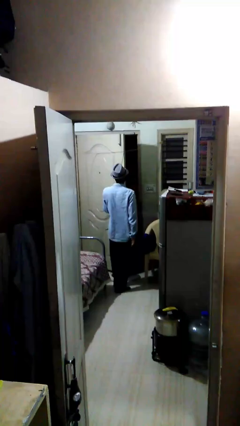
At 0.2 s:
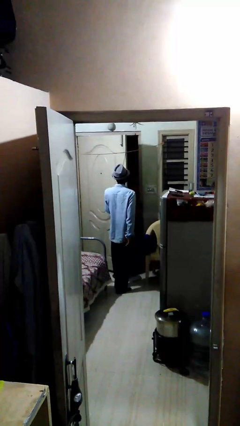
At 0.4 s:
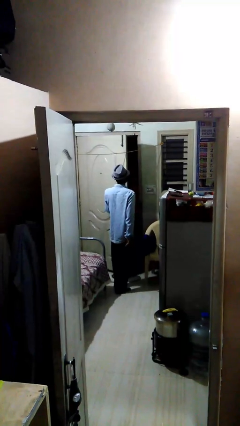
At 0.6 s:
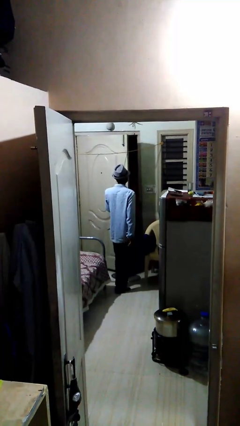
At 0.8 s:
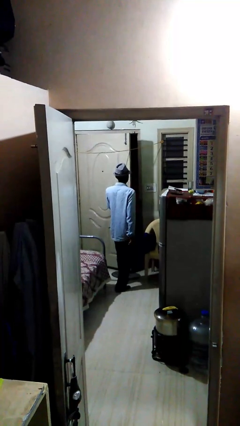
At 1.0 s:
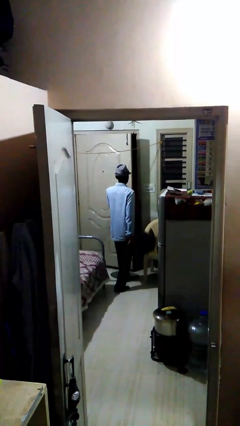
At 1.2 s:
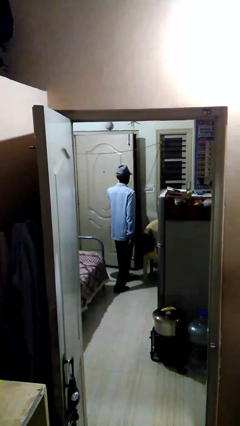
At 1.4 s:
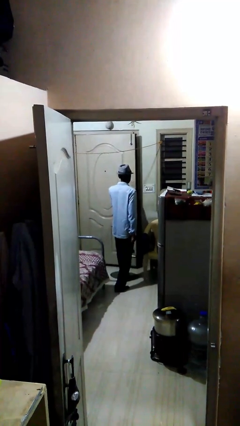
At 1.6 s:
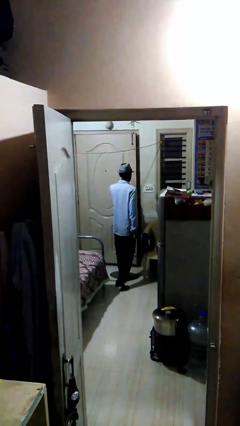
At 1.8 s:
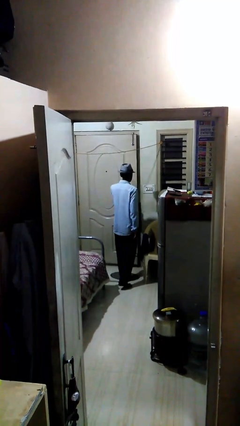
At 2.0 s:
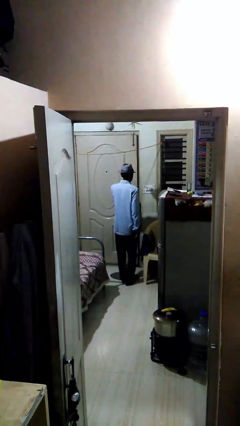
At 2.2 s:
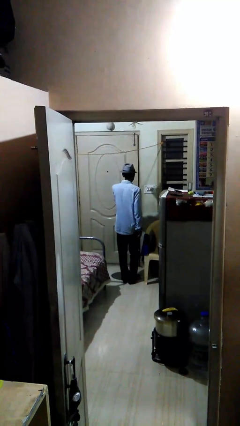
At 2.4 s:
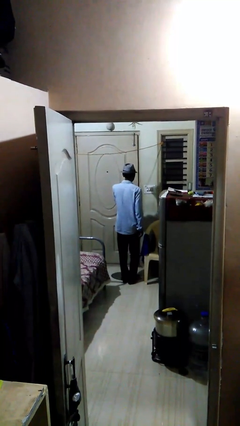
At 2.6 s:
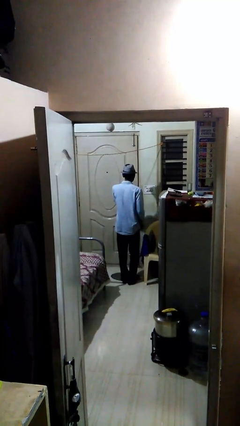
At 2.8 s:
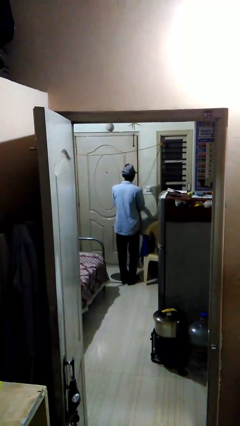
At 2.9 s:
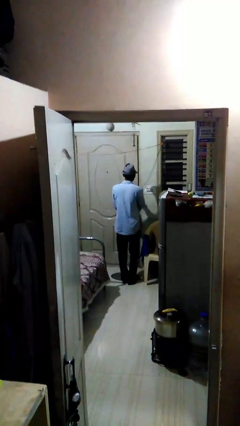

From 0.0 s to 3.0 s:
person closes facility door

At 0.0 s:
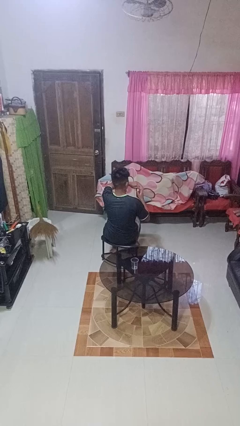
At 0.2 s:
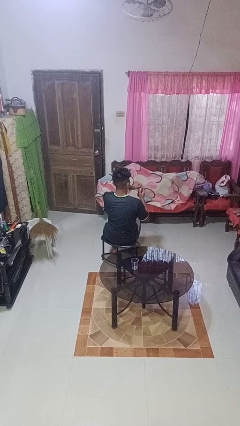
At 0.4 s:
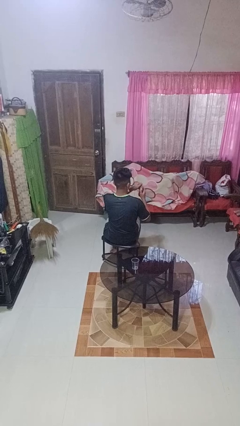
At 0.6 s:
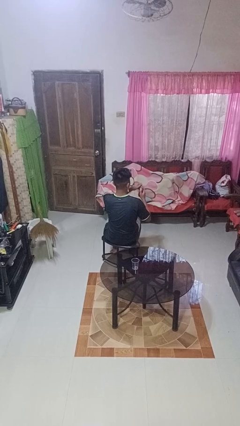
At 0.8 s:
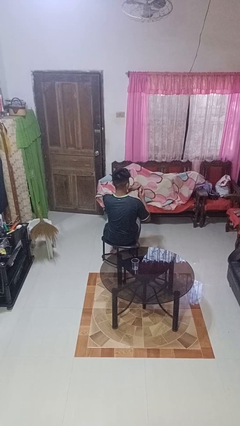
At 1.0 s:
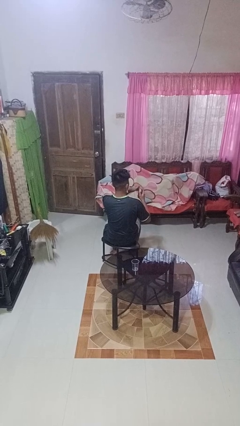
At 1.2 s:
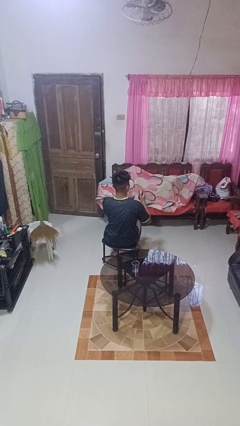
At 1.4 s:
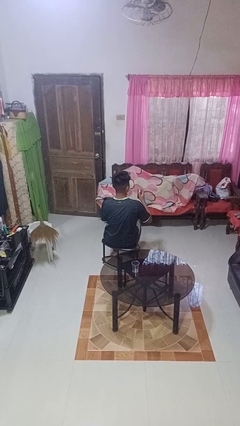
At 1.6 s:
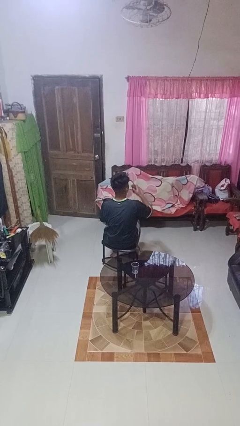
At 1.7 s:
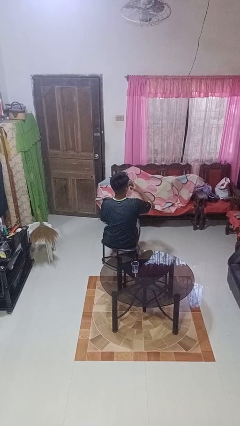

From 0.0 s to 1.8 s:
person opens beverage can

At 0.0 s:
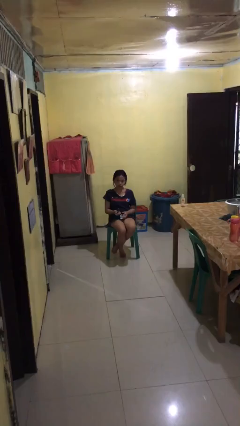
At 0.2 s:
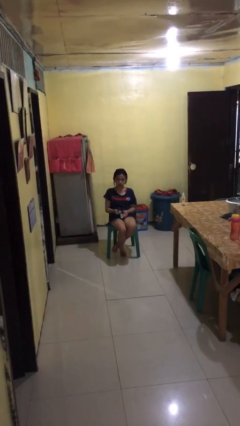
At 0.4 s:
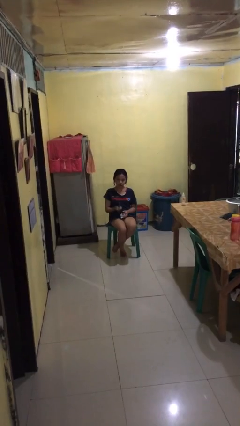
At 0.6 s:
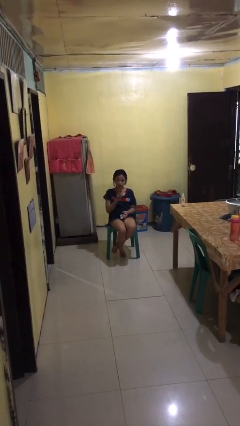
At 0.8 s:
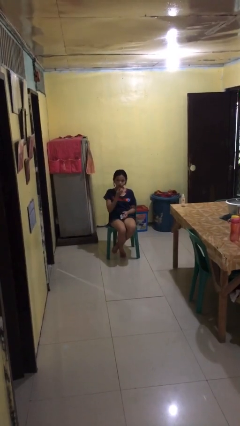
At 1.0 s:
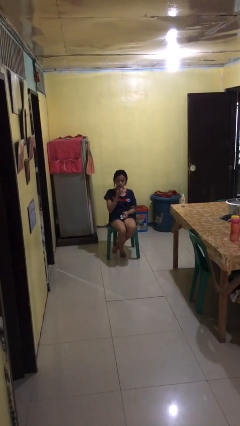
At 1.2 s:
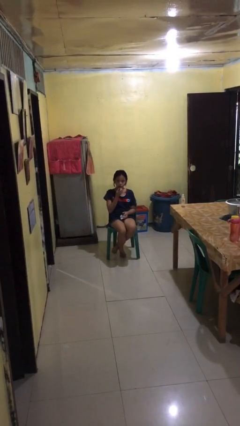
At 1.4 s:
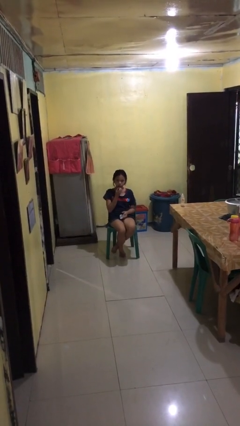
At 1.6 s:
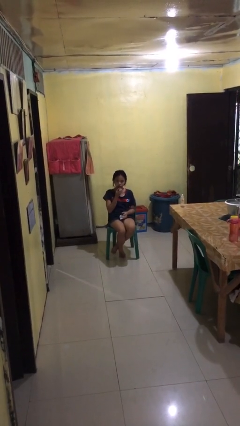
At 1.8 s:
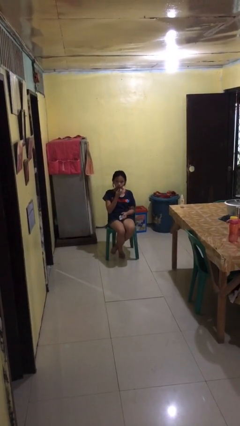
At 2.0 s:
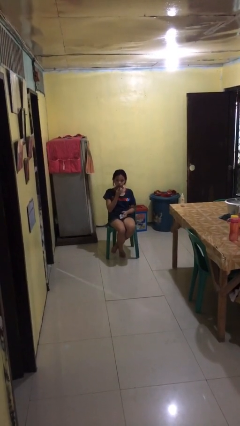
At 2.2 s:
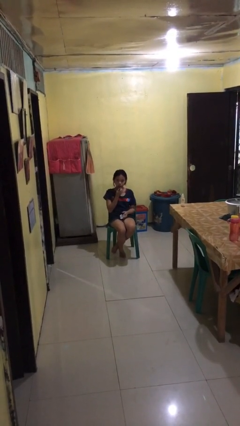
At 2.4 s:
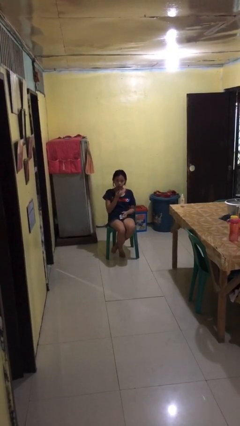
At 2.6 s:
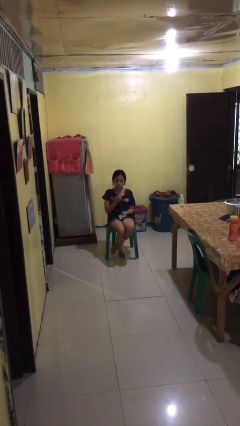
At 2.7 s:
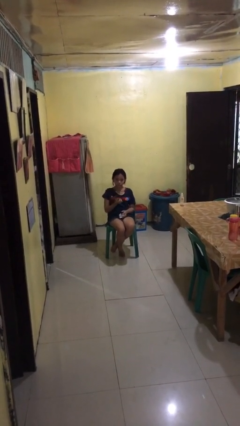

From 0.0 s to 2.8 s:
person applies lip makeup

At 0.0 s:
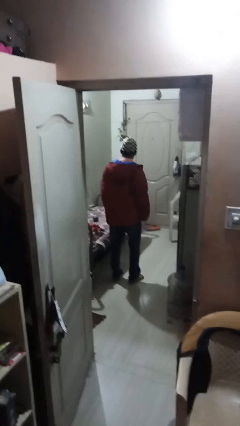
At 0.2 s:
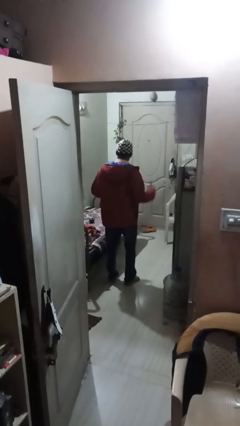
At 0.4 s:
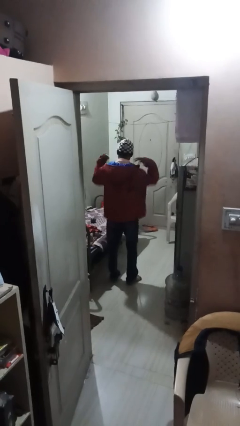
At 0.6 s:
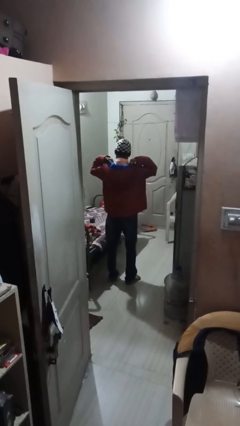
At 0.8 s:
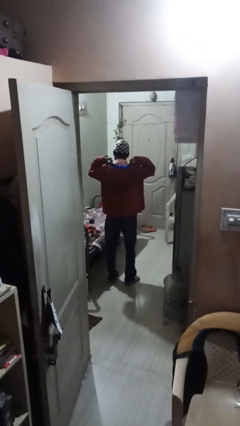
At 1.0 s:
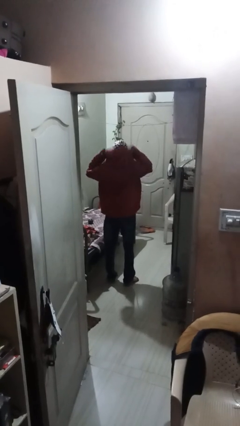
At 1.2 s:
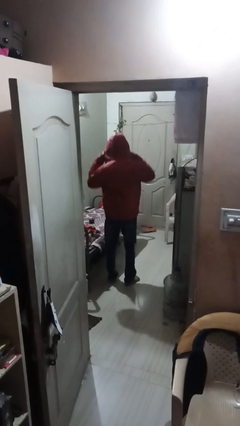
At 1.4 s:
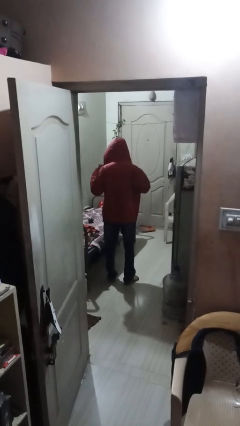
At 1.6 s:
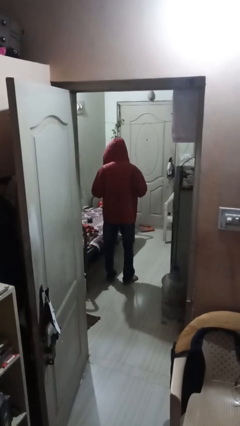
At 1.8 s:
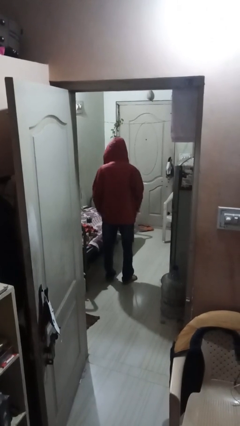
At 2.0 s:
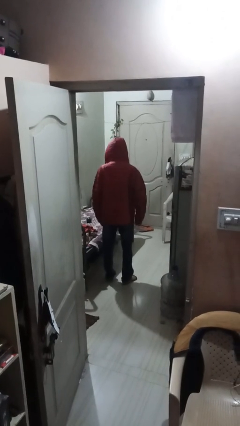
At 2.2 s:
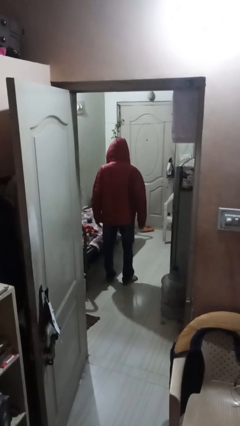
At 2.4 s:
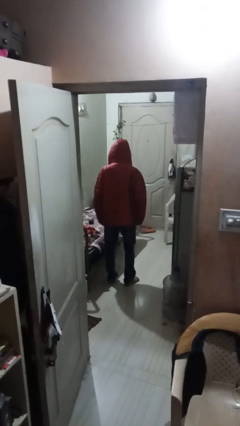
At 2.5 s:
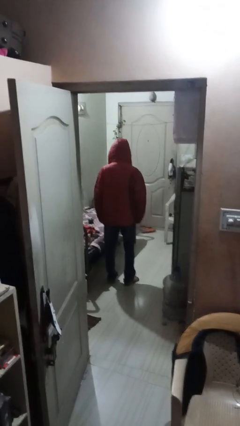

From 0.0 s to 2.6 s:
person puts on hoodie

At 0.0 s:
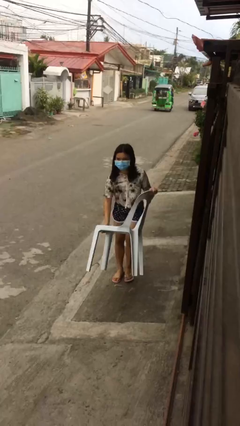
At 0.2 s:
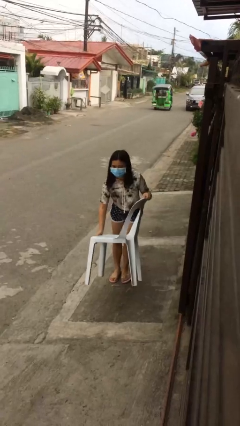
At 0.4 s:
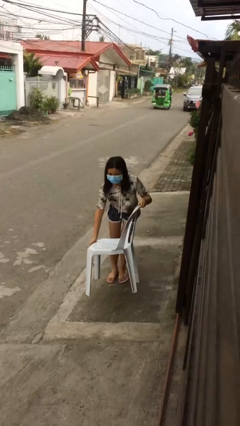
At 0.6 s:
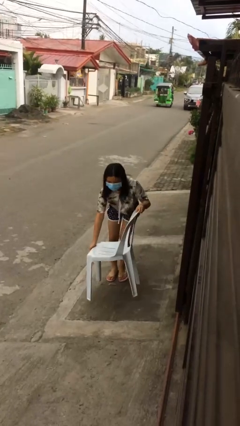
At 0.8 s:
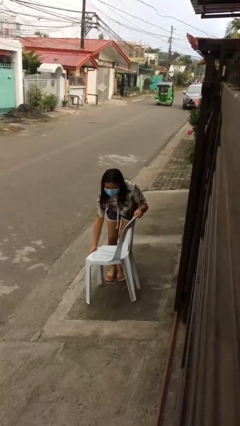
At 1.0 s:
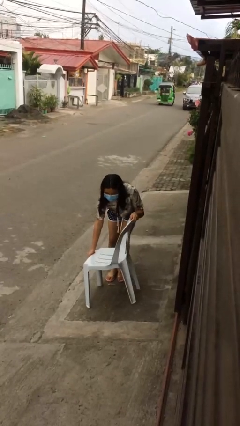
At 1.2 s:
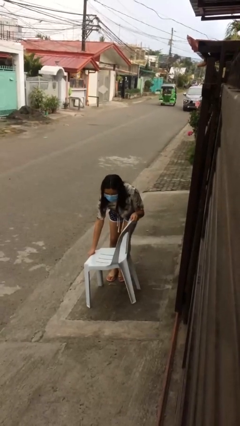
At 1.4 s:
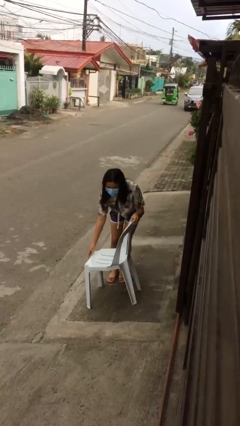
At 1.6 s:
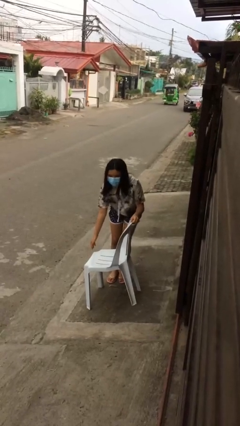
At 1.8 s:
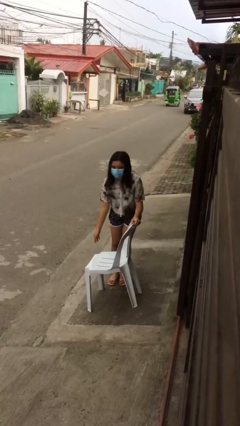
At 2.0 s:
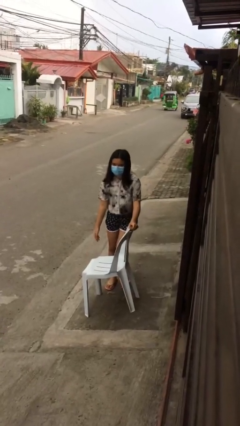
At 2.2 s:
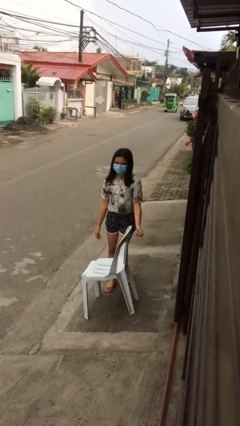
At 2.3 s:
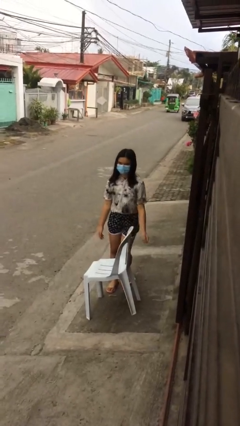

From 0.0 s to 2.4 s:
person puts down object on floor

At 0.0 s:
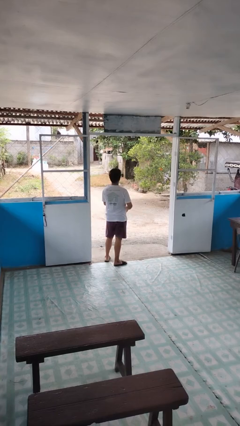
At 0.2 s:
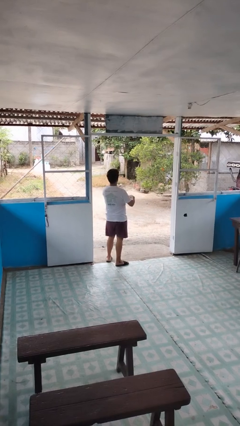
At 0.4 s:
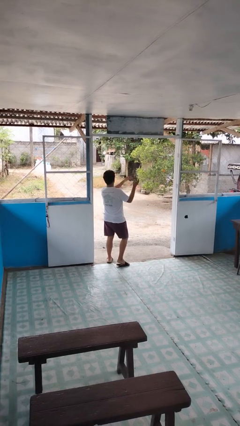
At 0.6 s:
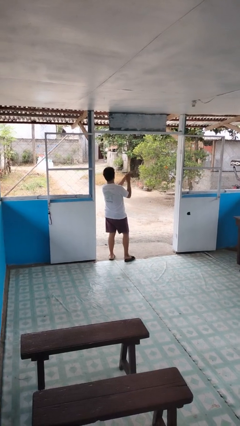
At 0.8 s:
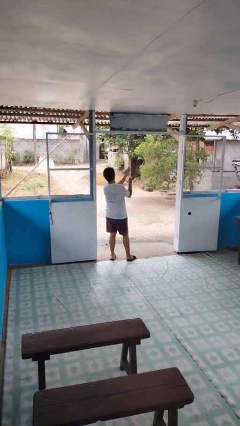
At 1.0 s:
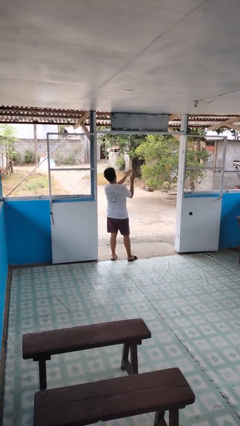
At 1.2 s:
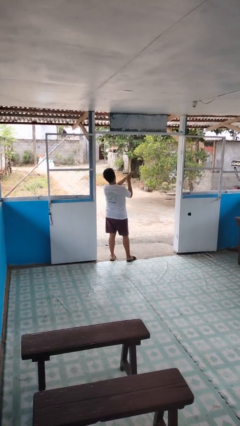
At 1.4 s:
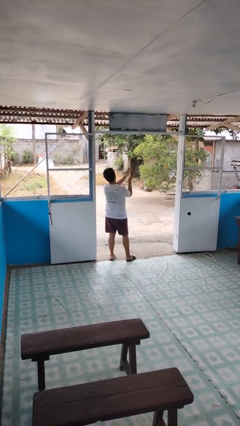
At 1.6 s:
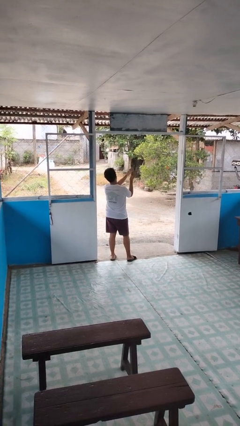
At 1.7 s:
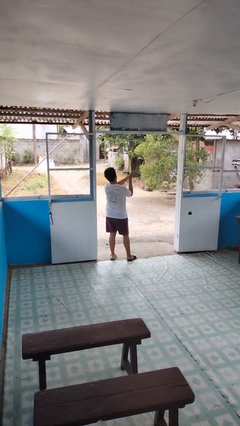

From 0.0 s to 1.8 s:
person claps hands

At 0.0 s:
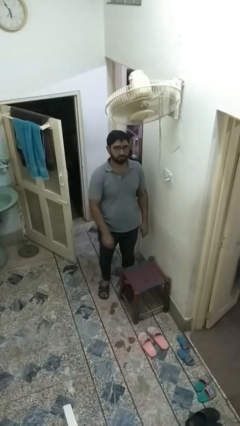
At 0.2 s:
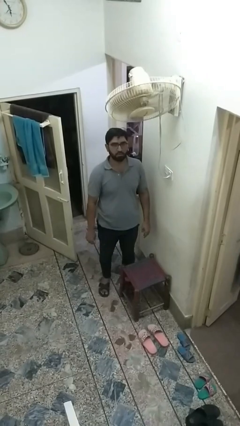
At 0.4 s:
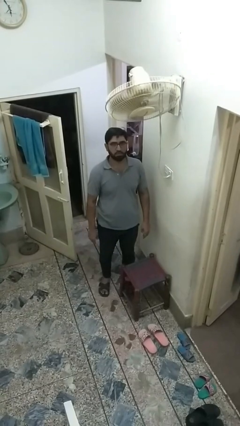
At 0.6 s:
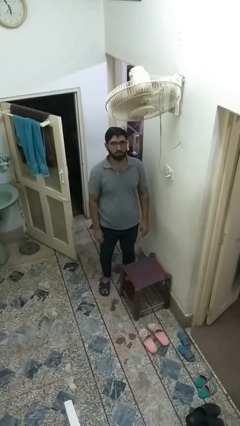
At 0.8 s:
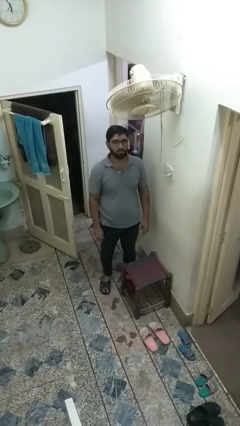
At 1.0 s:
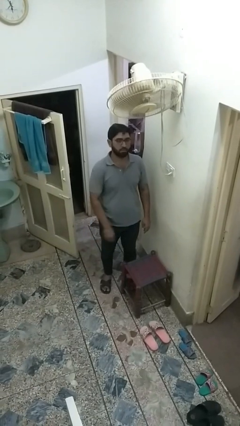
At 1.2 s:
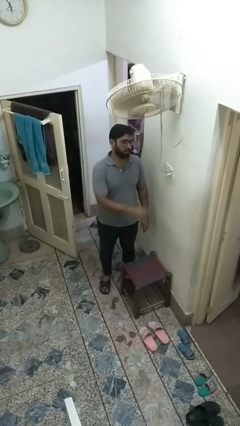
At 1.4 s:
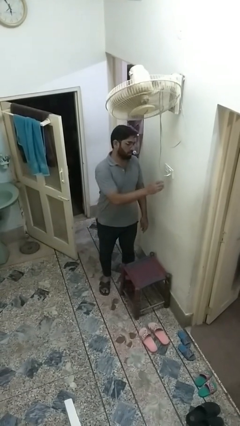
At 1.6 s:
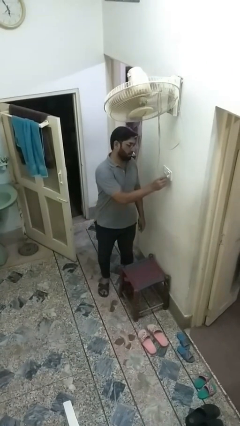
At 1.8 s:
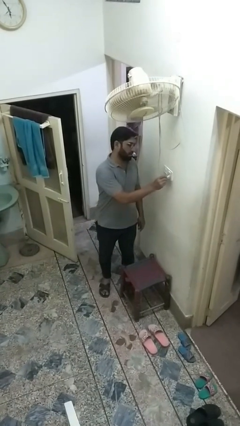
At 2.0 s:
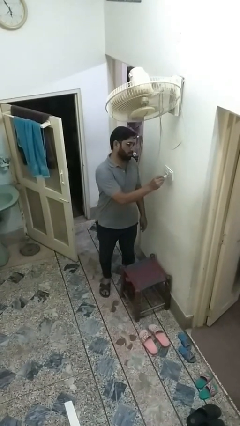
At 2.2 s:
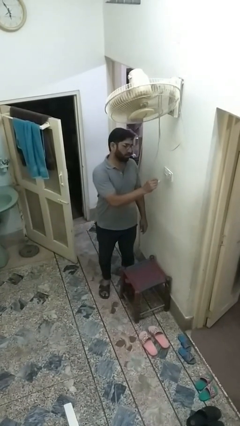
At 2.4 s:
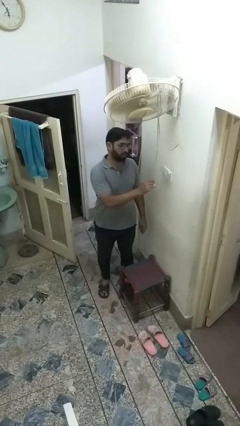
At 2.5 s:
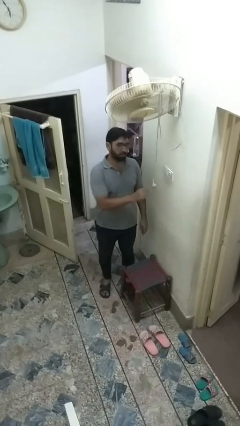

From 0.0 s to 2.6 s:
person unplugs from electrical socket

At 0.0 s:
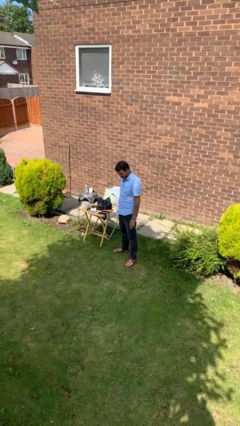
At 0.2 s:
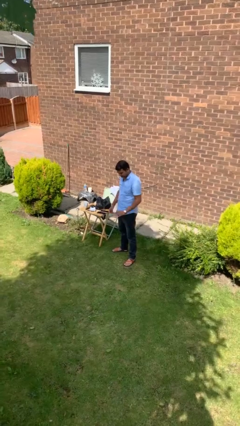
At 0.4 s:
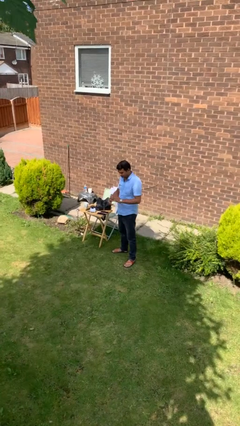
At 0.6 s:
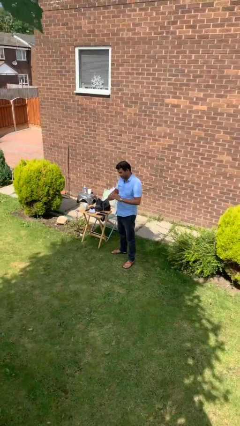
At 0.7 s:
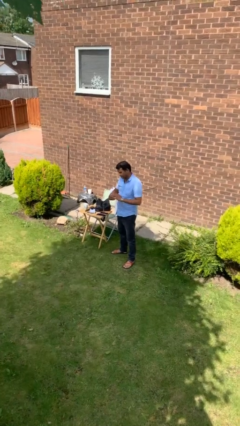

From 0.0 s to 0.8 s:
person takes off ring
